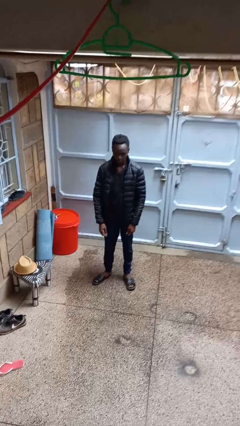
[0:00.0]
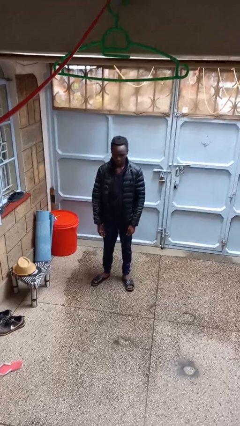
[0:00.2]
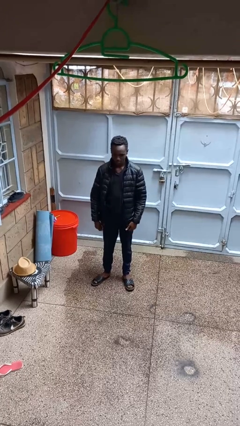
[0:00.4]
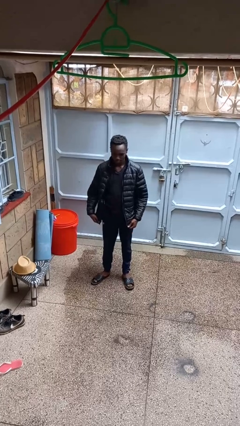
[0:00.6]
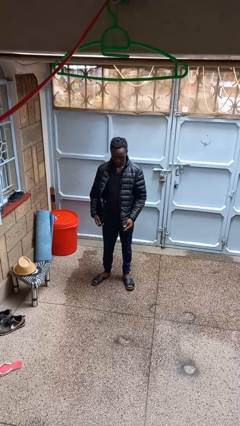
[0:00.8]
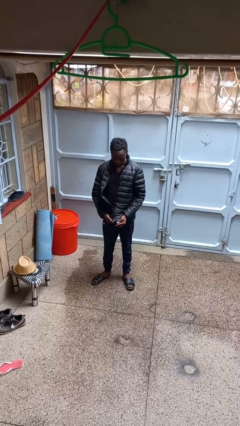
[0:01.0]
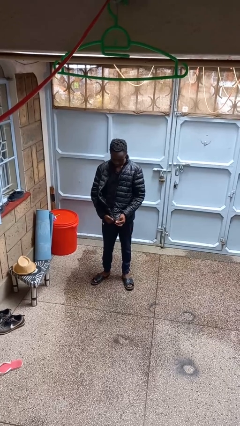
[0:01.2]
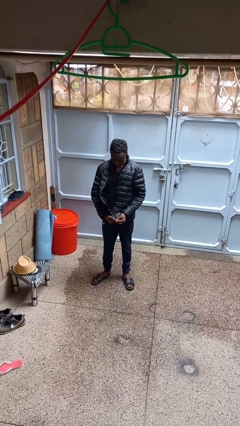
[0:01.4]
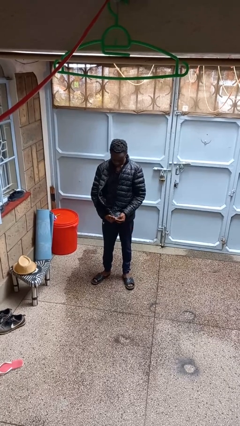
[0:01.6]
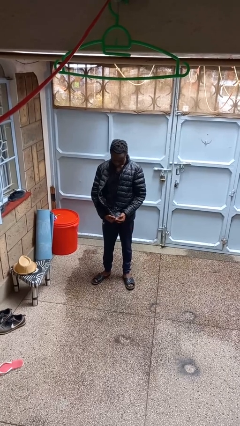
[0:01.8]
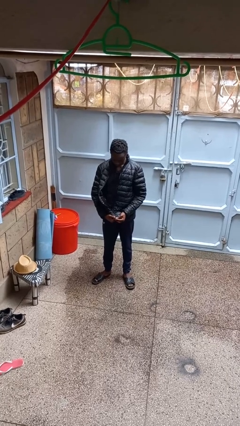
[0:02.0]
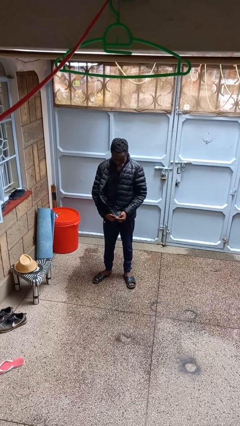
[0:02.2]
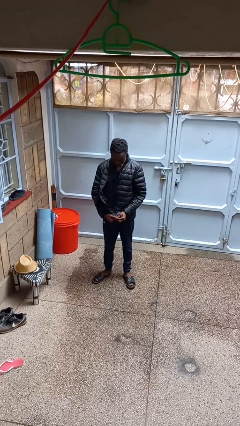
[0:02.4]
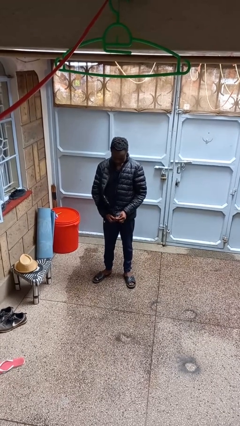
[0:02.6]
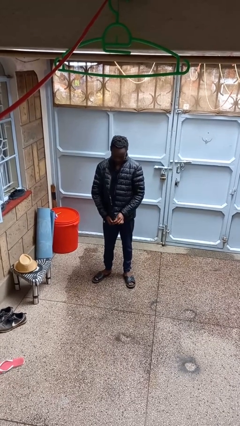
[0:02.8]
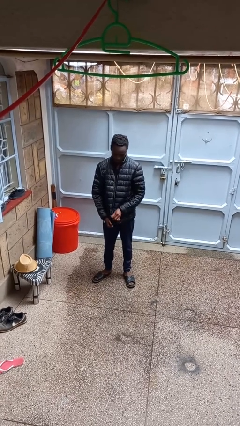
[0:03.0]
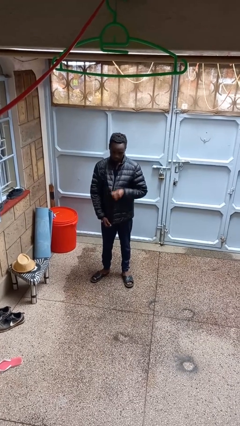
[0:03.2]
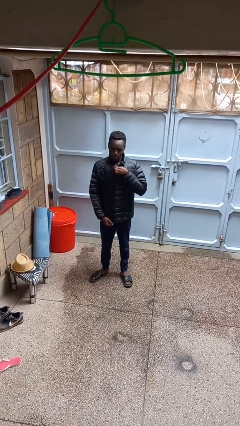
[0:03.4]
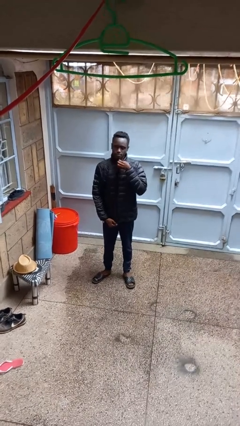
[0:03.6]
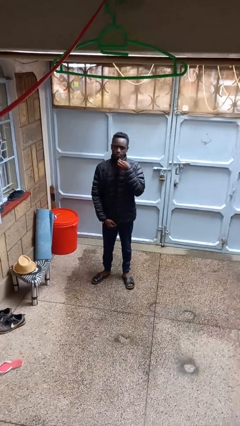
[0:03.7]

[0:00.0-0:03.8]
person zips up jacket

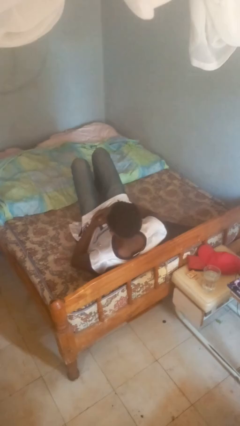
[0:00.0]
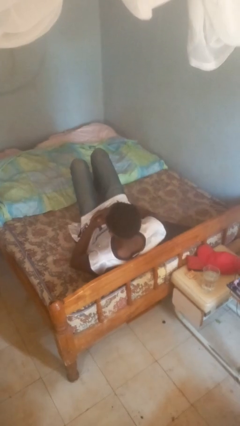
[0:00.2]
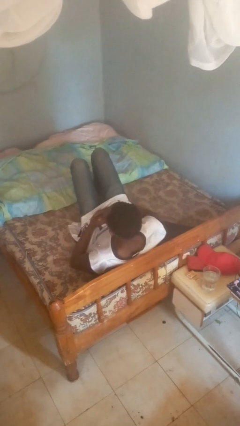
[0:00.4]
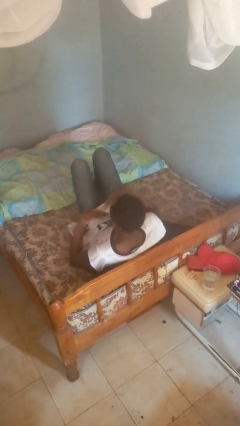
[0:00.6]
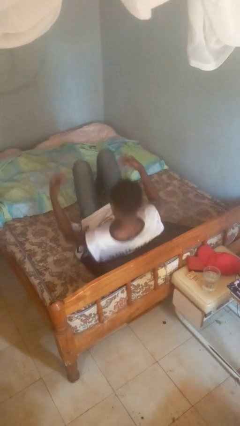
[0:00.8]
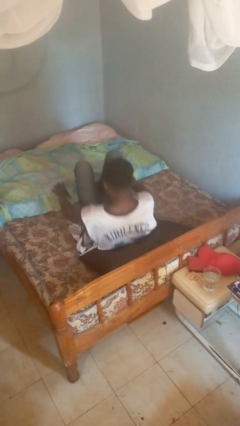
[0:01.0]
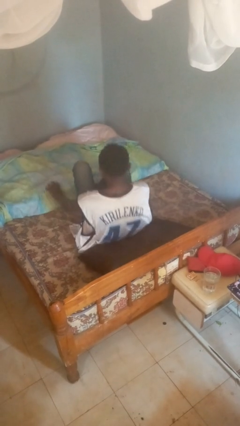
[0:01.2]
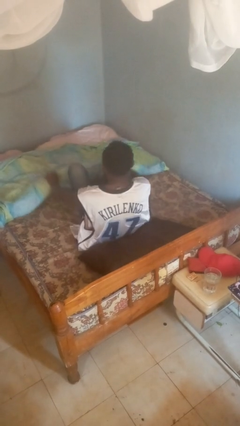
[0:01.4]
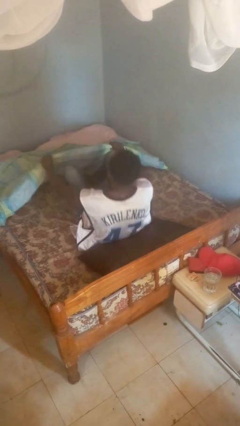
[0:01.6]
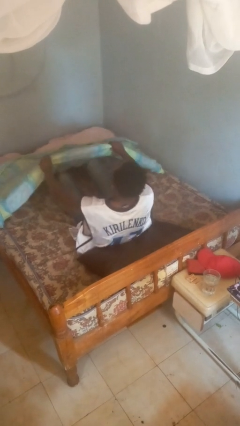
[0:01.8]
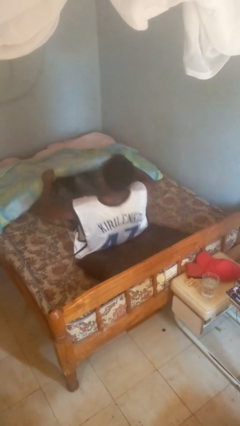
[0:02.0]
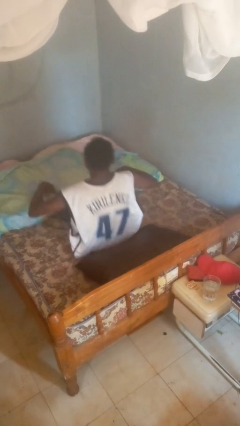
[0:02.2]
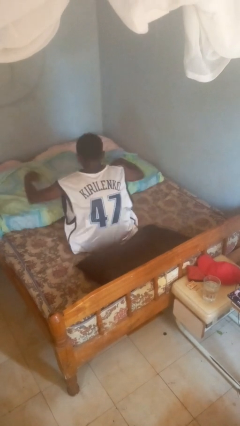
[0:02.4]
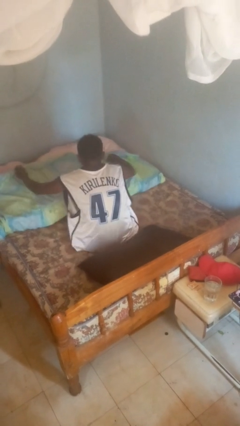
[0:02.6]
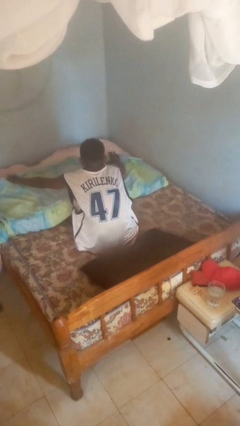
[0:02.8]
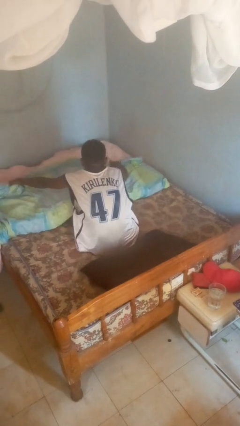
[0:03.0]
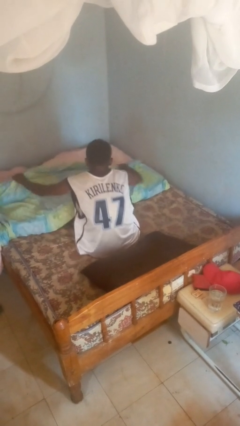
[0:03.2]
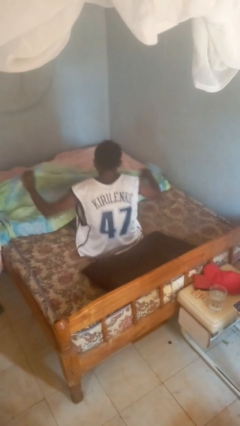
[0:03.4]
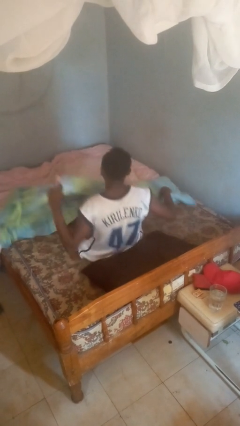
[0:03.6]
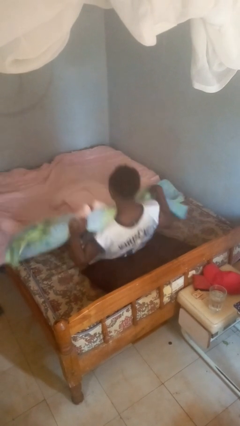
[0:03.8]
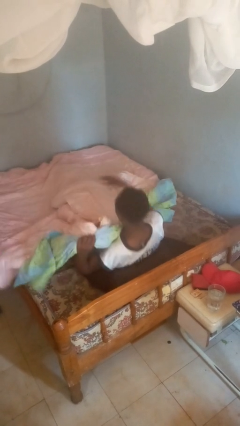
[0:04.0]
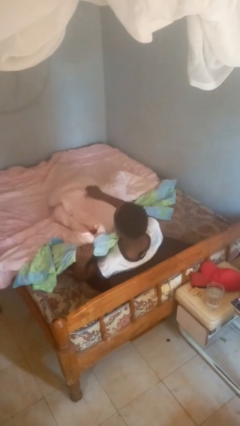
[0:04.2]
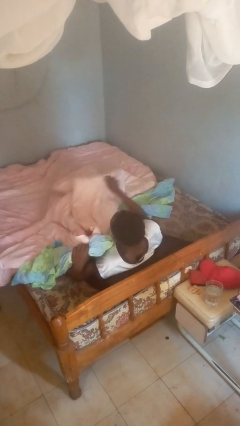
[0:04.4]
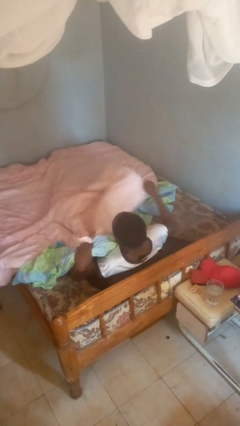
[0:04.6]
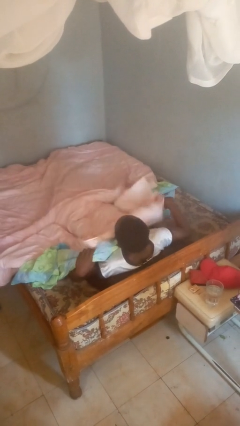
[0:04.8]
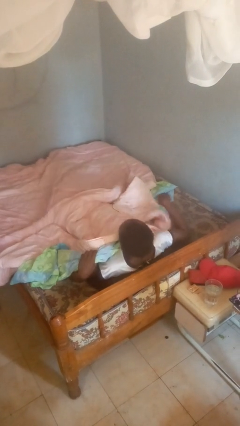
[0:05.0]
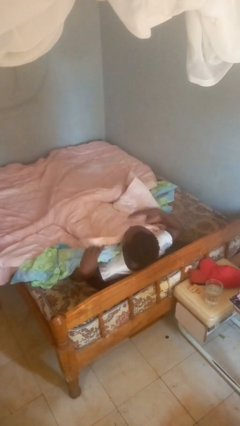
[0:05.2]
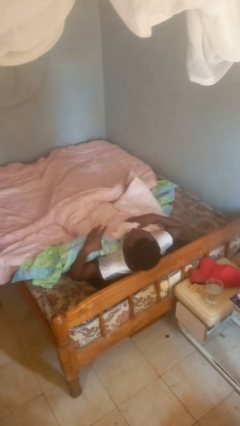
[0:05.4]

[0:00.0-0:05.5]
person covers with bedsheets

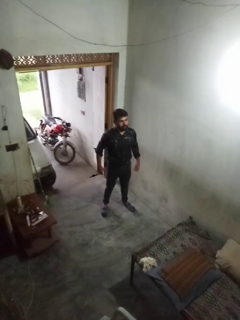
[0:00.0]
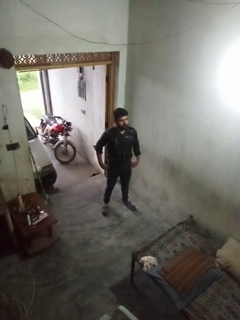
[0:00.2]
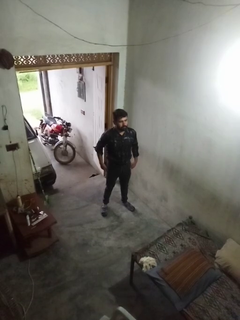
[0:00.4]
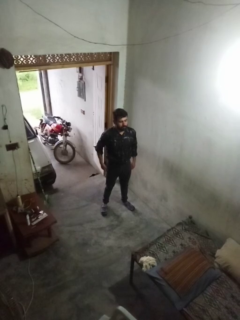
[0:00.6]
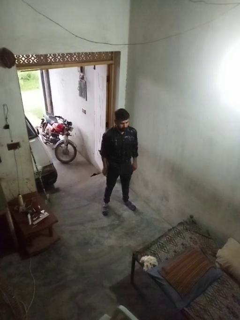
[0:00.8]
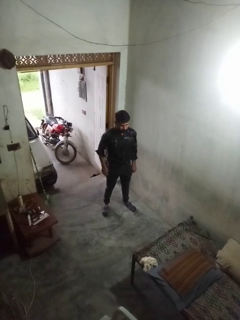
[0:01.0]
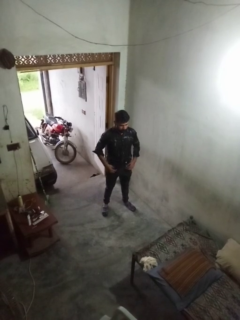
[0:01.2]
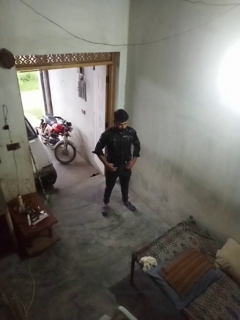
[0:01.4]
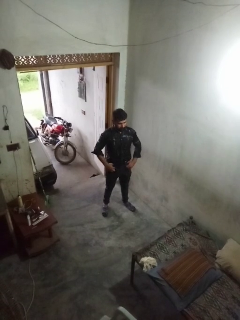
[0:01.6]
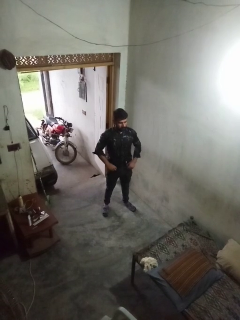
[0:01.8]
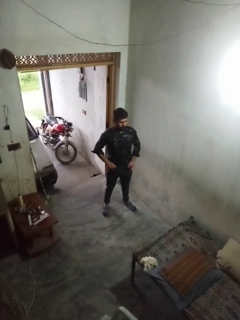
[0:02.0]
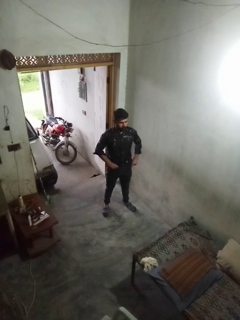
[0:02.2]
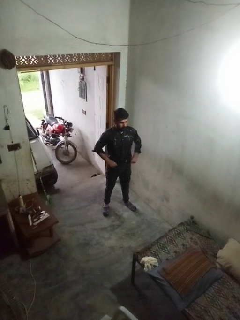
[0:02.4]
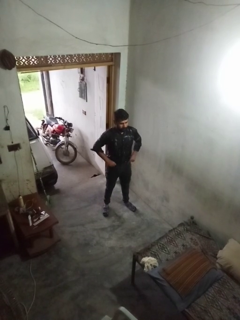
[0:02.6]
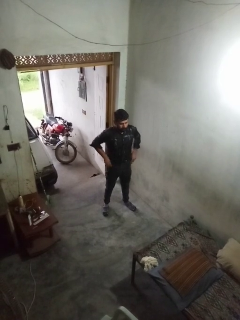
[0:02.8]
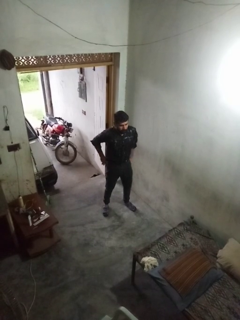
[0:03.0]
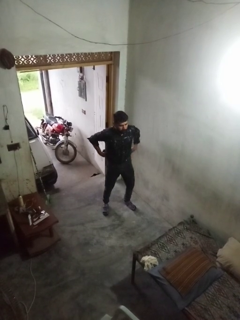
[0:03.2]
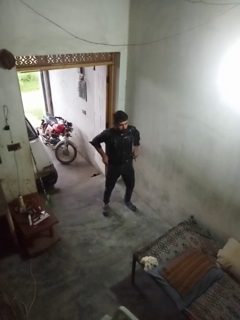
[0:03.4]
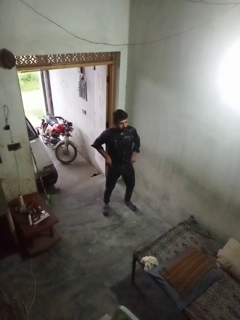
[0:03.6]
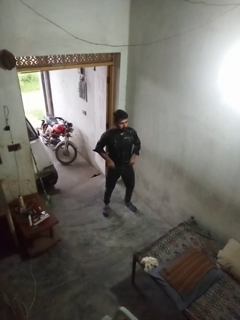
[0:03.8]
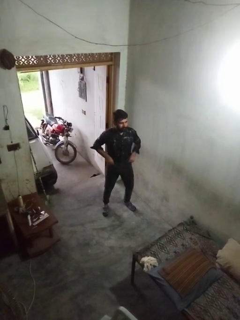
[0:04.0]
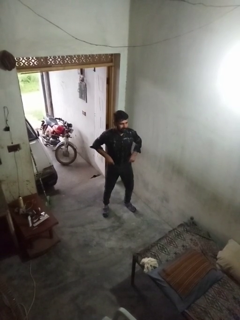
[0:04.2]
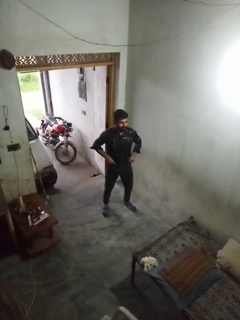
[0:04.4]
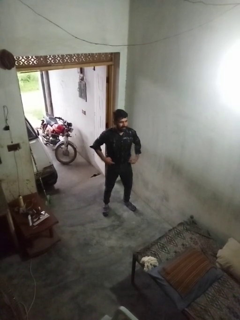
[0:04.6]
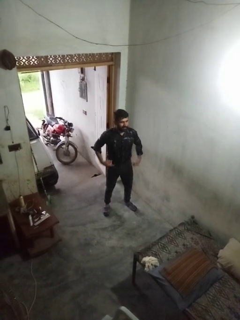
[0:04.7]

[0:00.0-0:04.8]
person hikes up pants

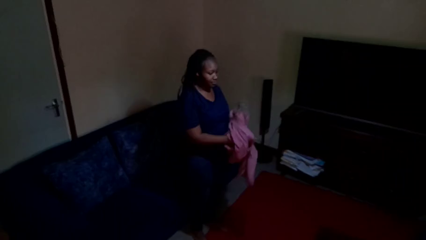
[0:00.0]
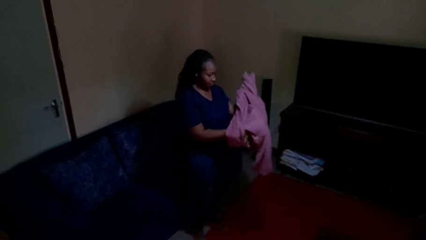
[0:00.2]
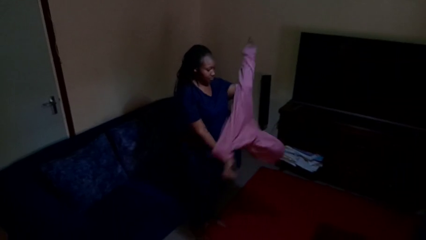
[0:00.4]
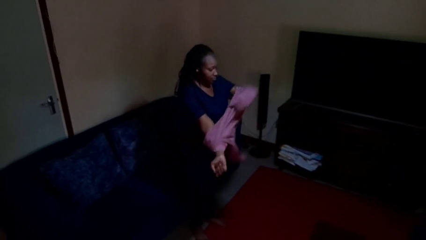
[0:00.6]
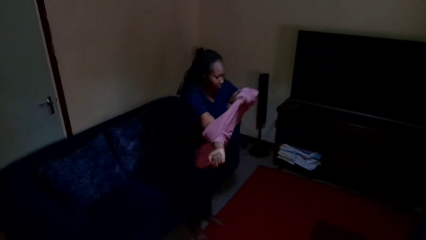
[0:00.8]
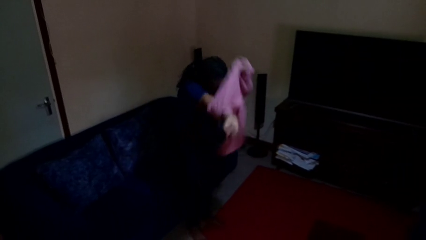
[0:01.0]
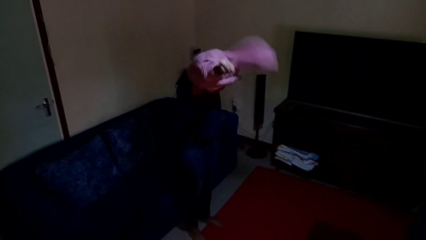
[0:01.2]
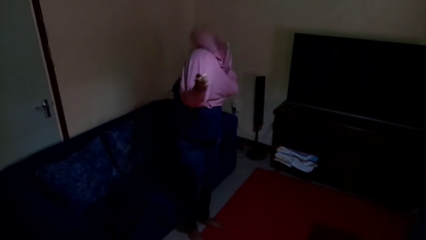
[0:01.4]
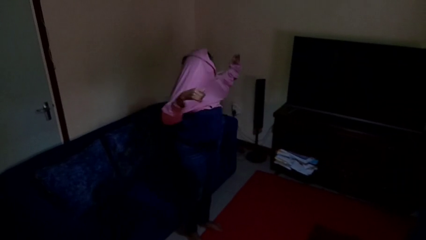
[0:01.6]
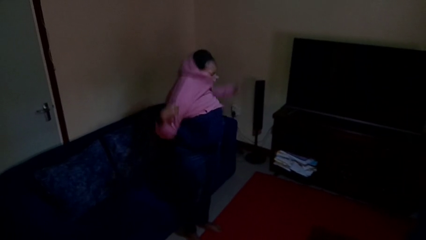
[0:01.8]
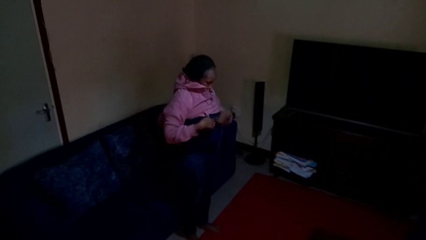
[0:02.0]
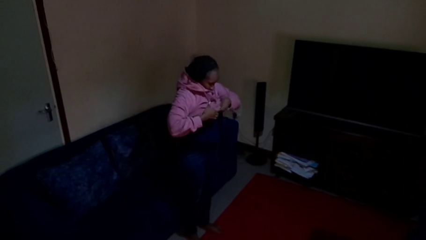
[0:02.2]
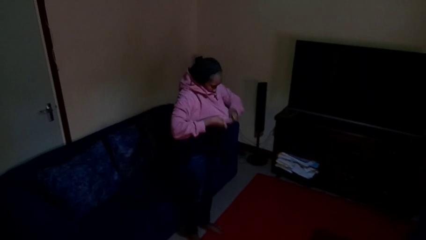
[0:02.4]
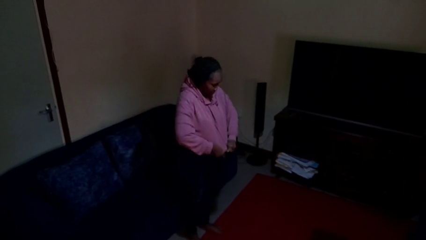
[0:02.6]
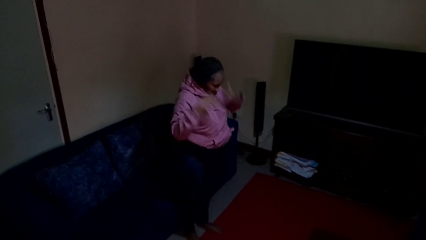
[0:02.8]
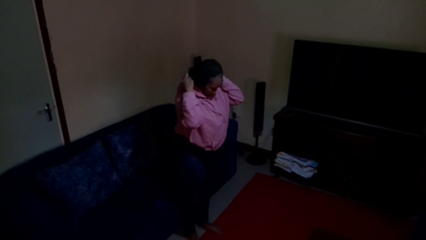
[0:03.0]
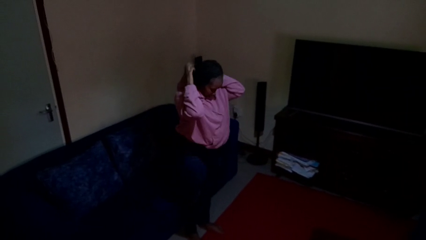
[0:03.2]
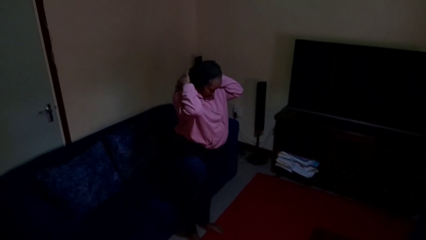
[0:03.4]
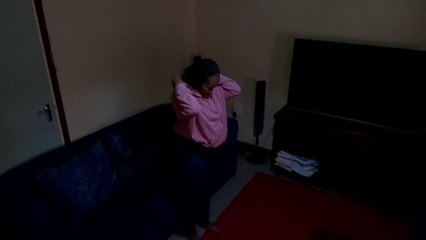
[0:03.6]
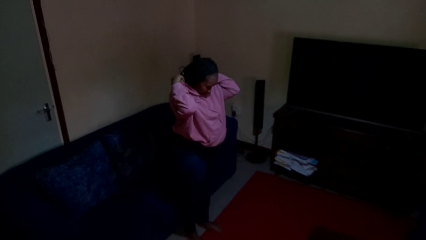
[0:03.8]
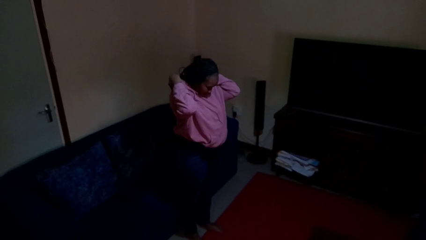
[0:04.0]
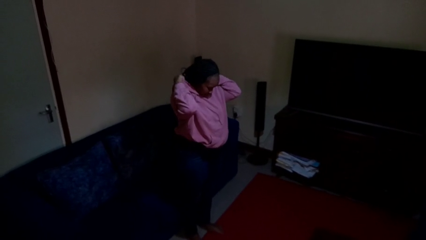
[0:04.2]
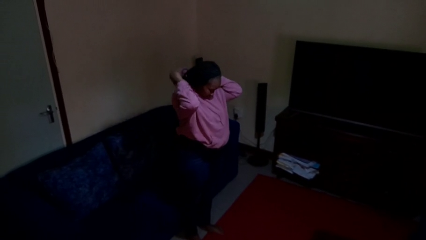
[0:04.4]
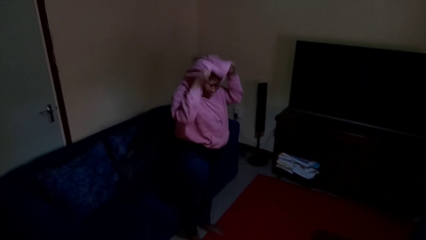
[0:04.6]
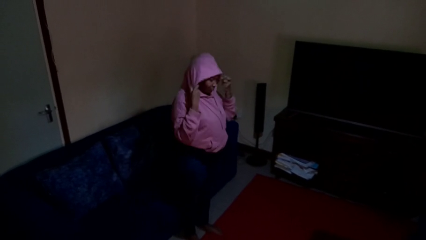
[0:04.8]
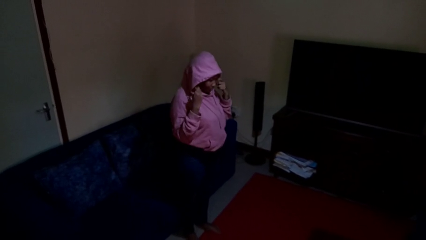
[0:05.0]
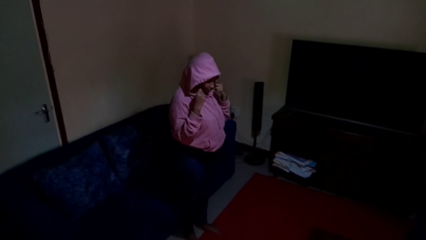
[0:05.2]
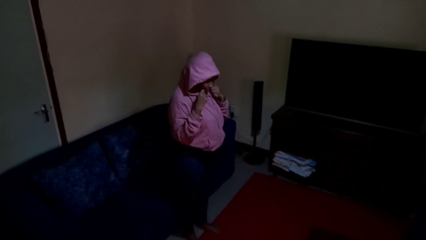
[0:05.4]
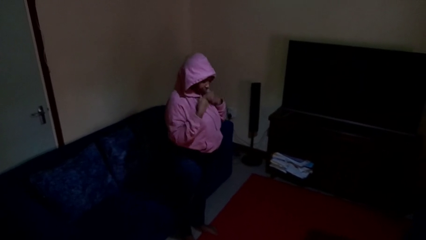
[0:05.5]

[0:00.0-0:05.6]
person puts on hoodie
